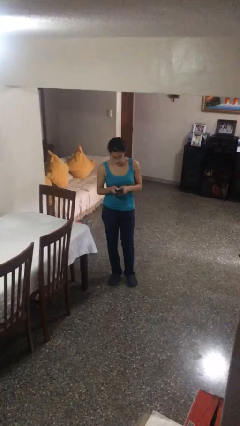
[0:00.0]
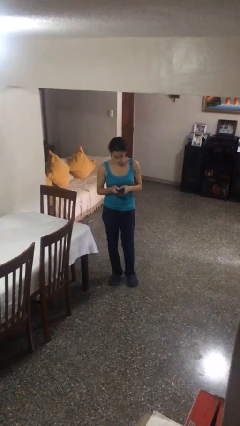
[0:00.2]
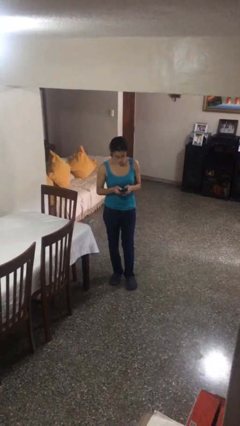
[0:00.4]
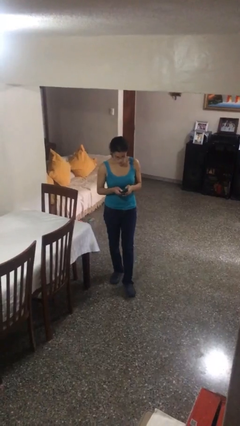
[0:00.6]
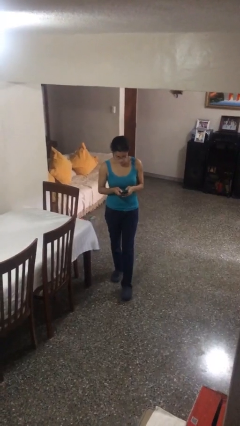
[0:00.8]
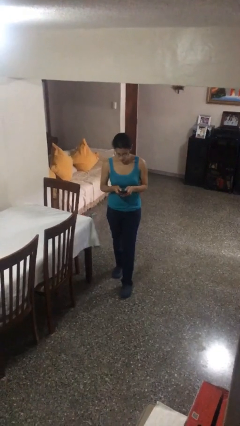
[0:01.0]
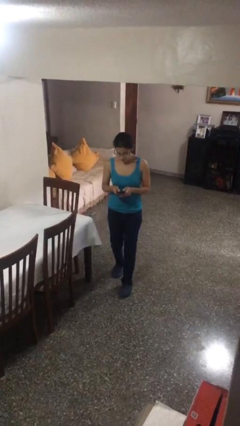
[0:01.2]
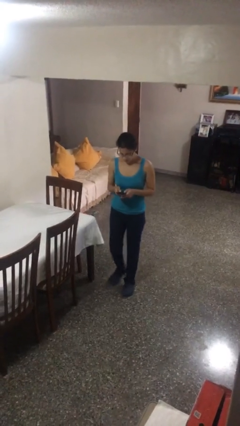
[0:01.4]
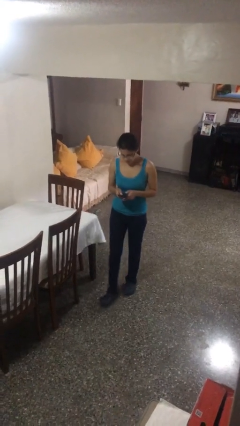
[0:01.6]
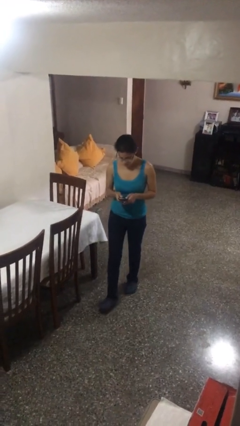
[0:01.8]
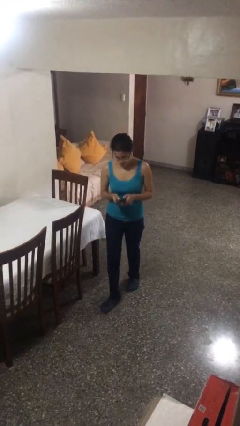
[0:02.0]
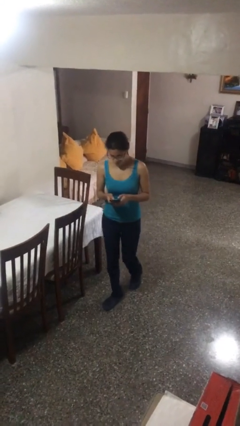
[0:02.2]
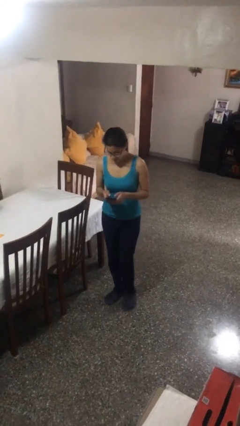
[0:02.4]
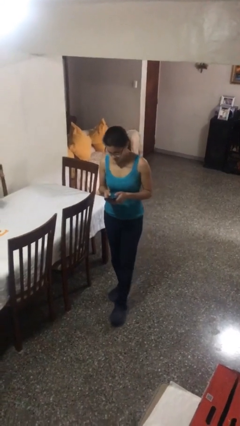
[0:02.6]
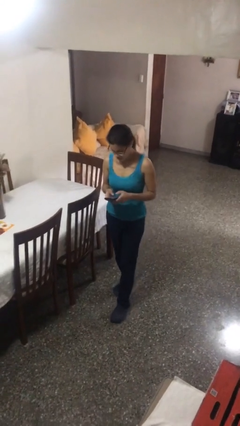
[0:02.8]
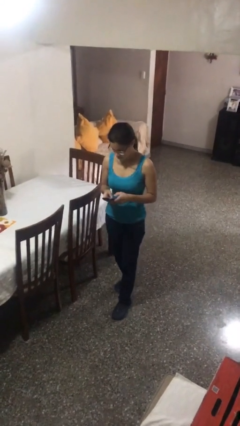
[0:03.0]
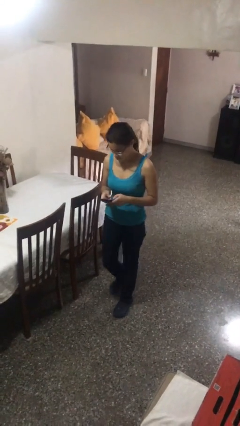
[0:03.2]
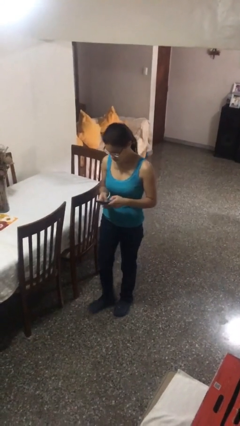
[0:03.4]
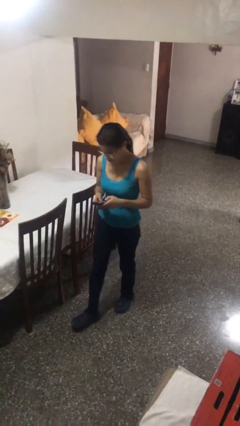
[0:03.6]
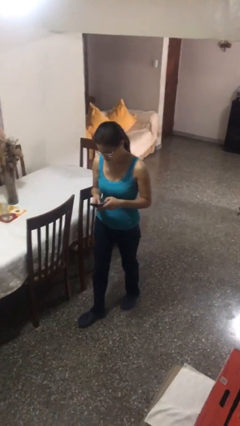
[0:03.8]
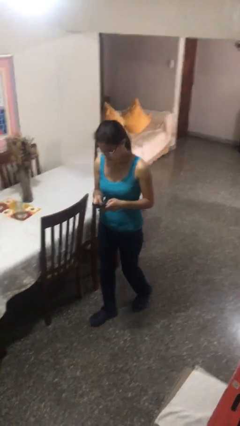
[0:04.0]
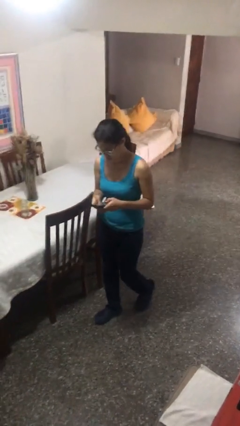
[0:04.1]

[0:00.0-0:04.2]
person texts on phone

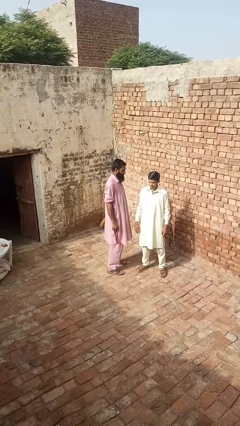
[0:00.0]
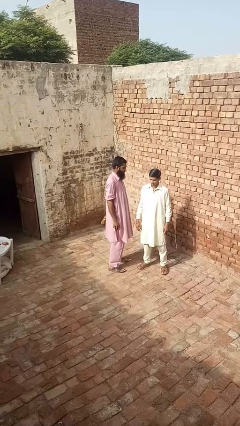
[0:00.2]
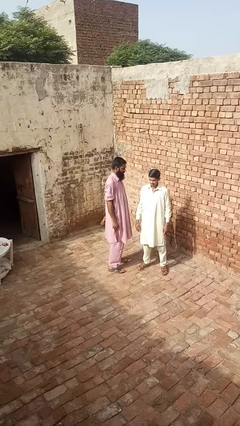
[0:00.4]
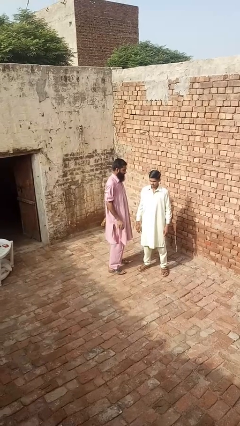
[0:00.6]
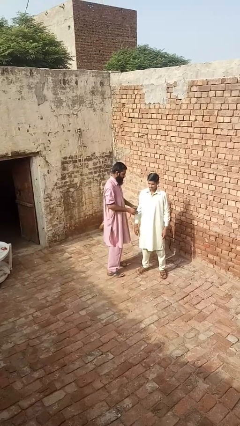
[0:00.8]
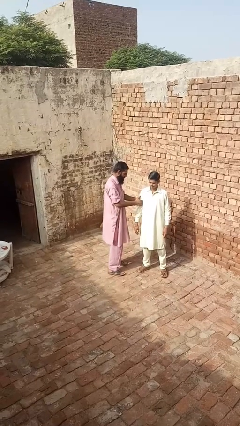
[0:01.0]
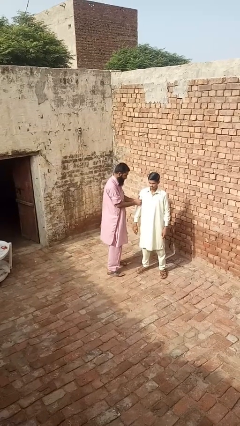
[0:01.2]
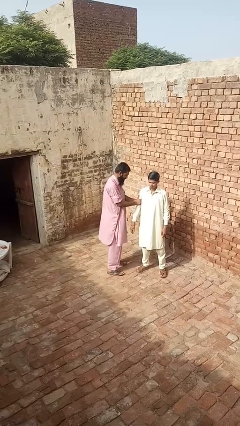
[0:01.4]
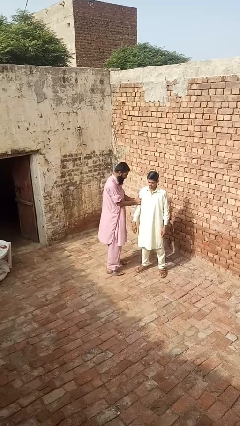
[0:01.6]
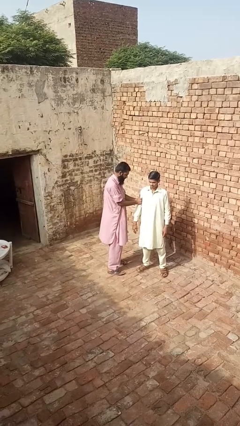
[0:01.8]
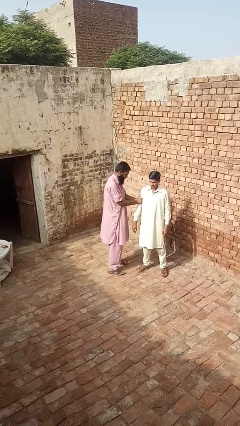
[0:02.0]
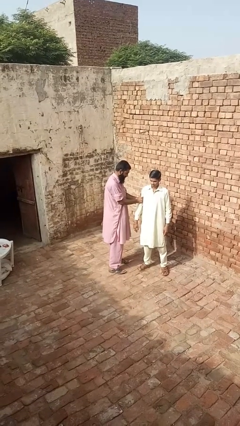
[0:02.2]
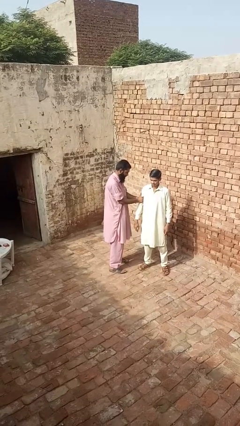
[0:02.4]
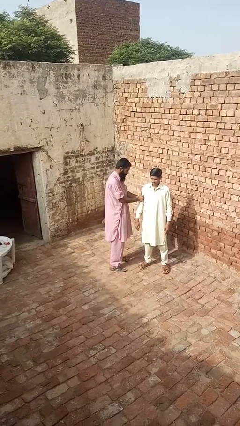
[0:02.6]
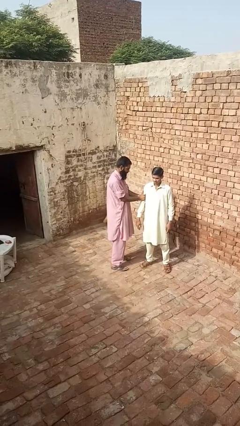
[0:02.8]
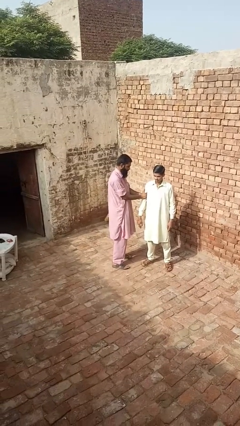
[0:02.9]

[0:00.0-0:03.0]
person grabs person by bicep

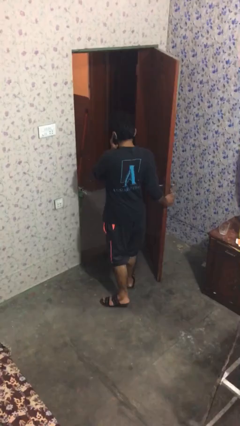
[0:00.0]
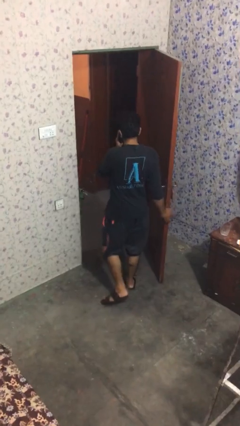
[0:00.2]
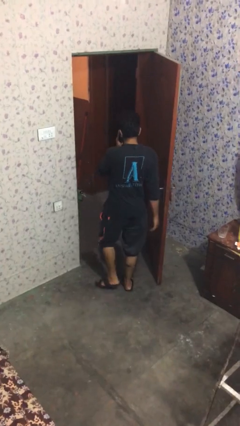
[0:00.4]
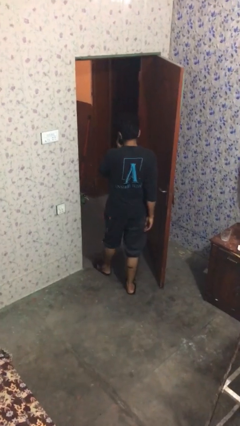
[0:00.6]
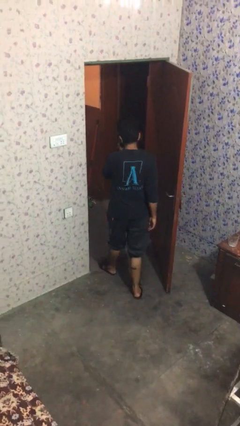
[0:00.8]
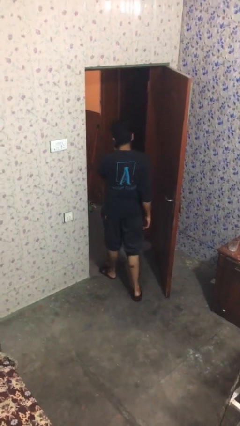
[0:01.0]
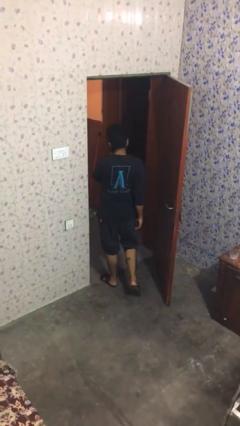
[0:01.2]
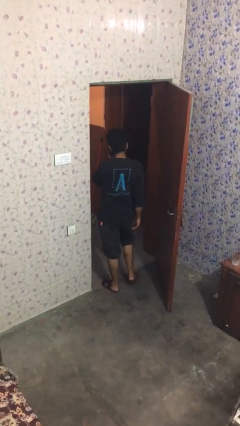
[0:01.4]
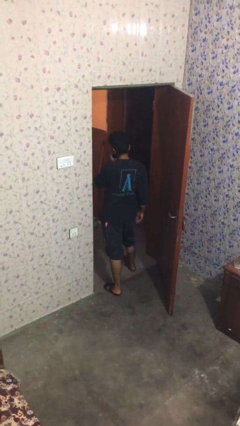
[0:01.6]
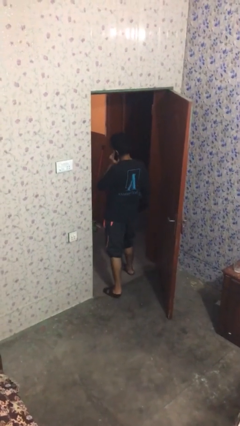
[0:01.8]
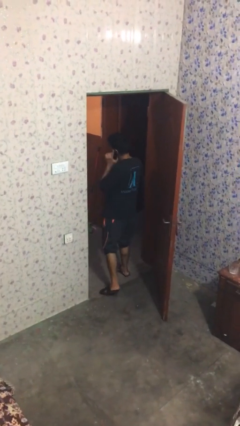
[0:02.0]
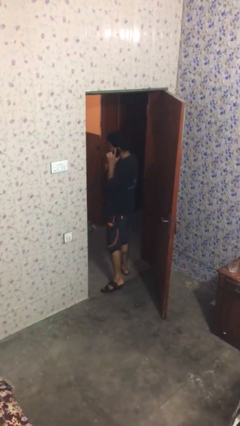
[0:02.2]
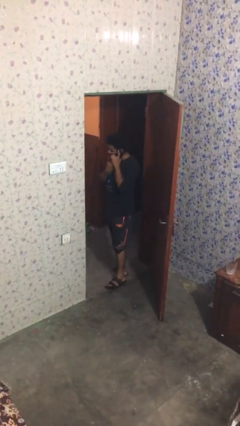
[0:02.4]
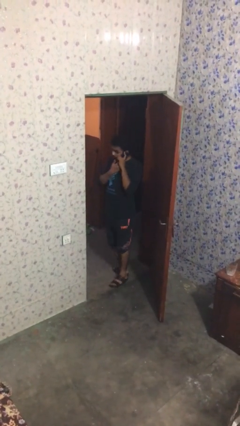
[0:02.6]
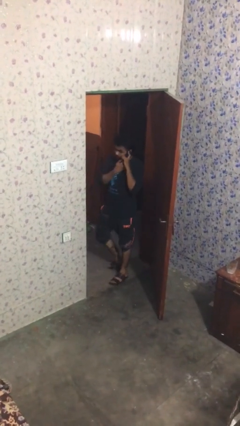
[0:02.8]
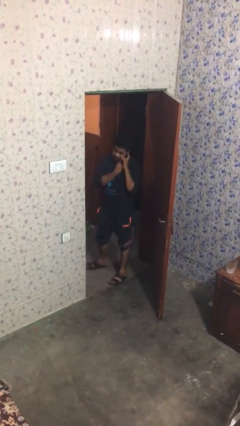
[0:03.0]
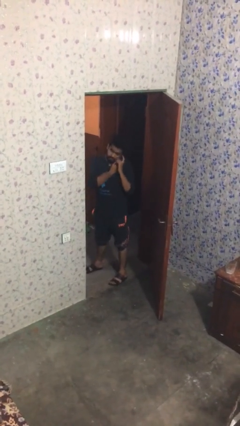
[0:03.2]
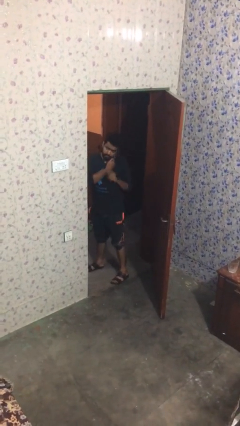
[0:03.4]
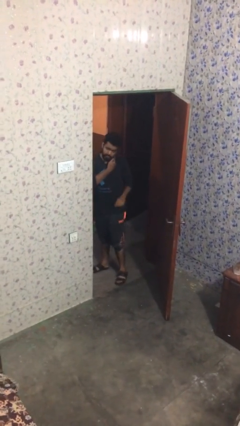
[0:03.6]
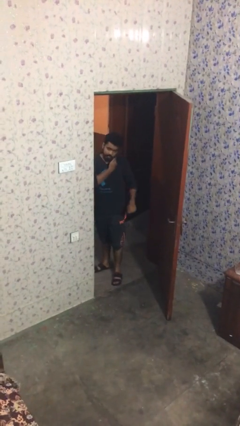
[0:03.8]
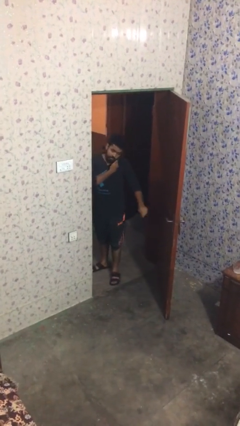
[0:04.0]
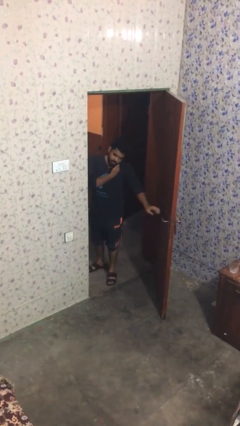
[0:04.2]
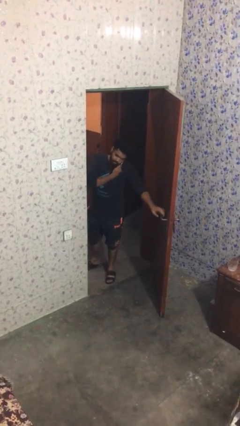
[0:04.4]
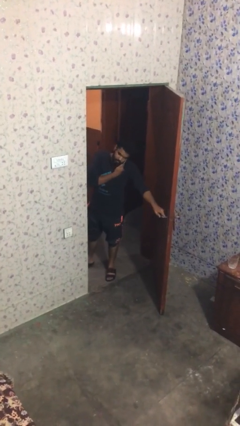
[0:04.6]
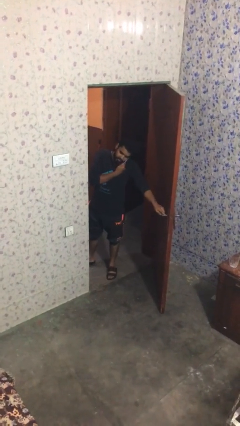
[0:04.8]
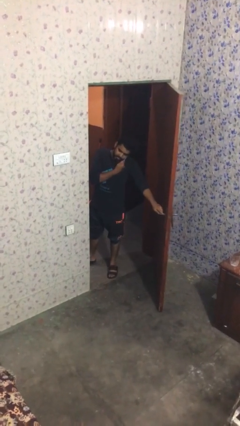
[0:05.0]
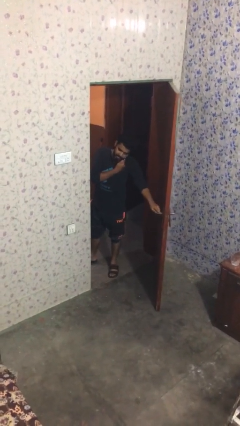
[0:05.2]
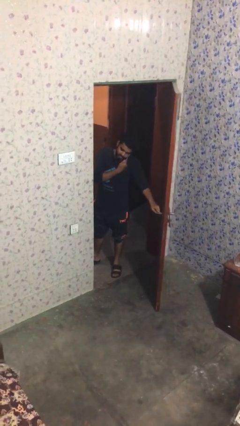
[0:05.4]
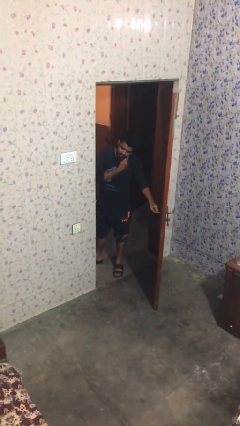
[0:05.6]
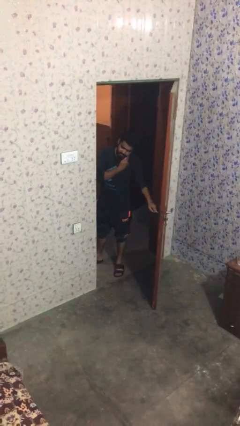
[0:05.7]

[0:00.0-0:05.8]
person exits scene through structure

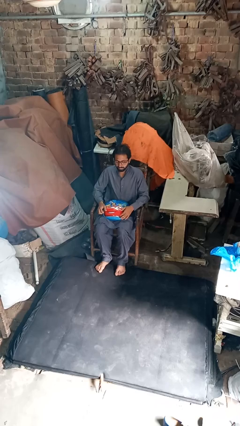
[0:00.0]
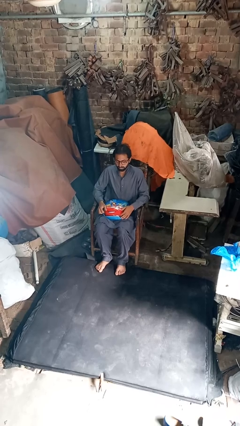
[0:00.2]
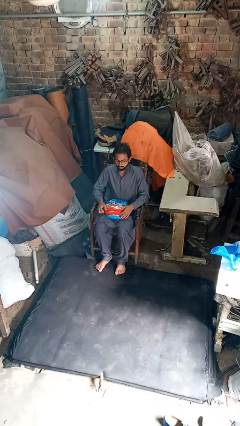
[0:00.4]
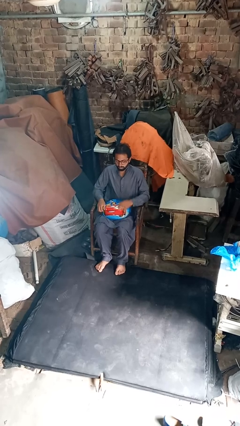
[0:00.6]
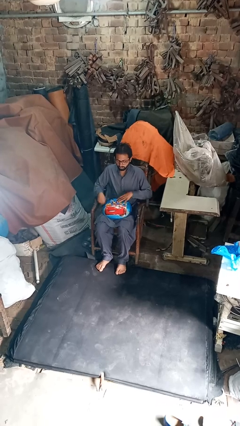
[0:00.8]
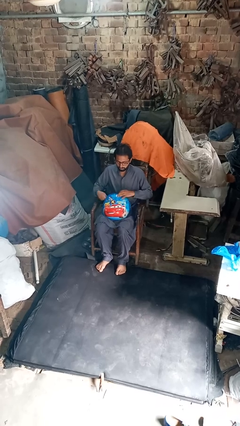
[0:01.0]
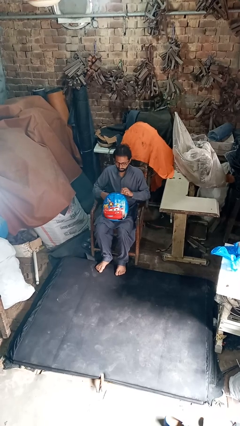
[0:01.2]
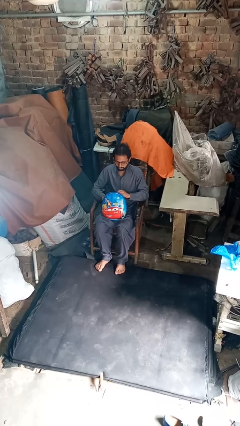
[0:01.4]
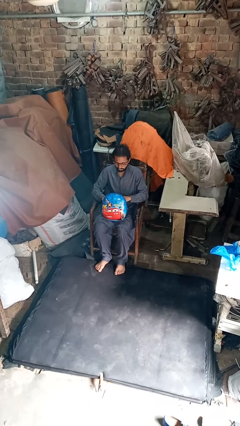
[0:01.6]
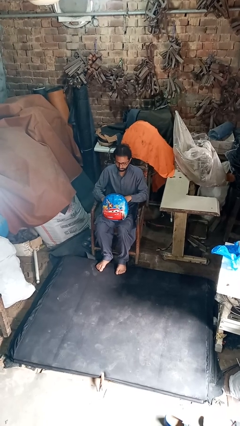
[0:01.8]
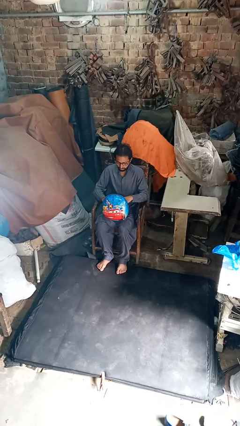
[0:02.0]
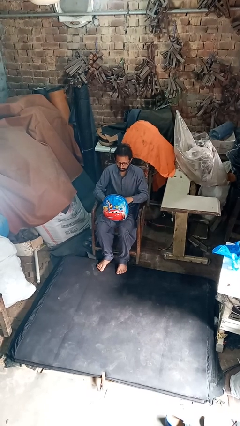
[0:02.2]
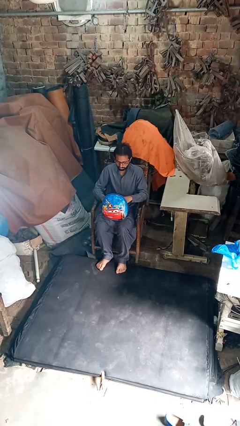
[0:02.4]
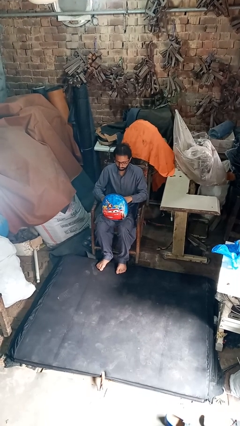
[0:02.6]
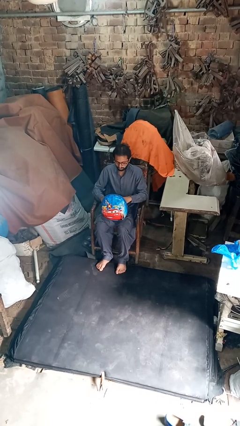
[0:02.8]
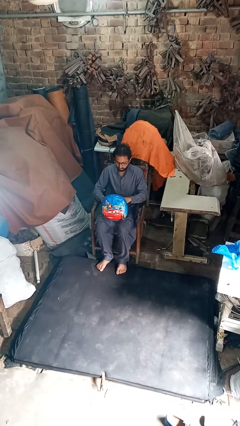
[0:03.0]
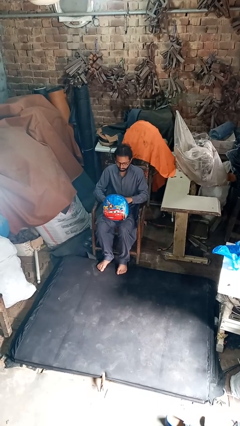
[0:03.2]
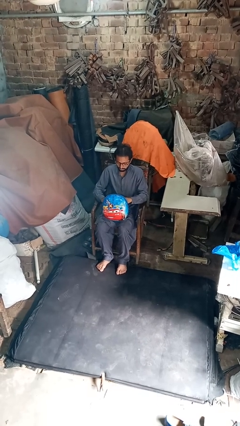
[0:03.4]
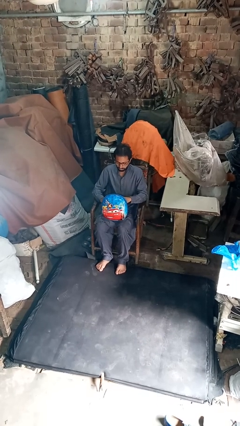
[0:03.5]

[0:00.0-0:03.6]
person searches in purse

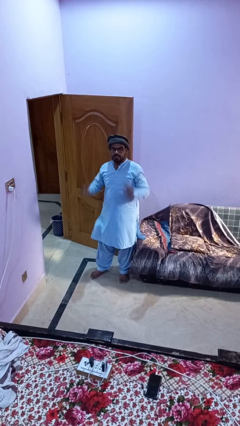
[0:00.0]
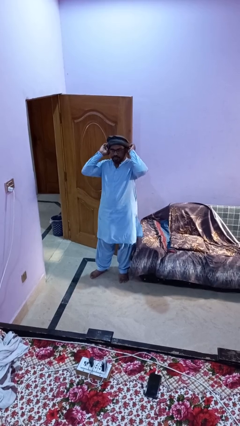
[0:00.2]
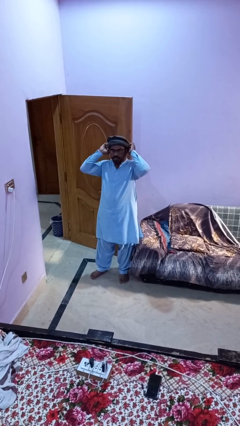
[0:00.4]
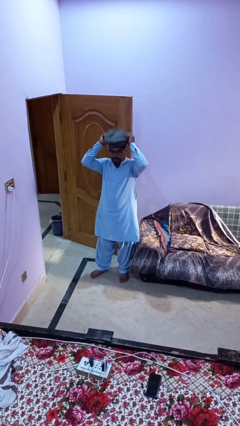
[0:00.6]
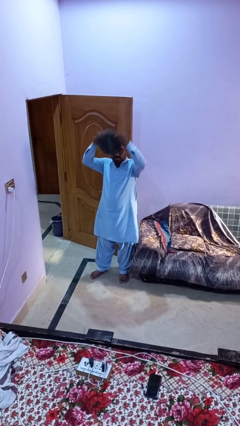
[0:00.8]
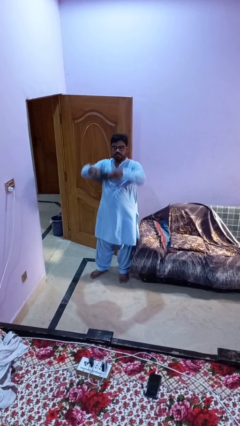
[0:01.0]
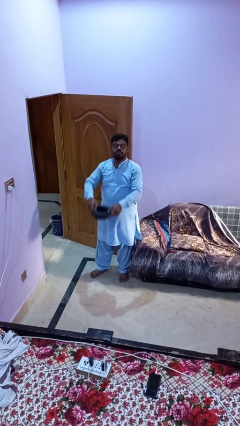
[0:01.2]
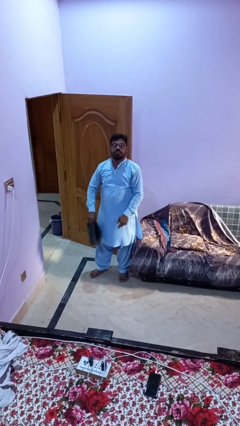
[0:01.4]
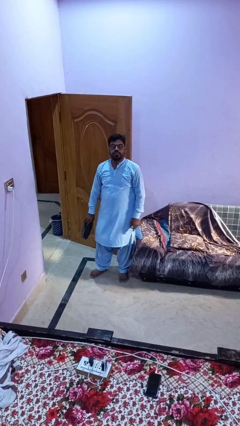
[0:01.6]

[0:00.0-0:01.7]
person takes off hat
